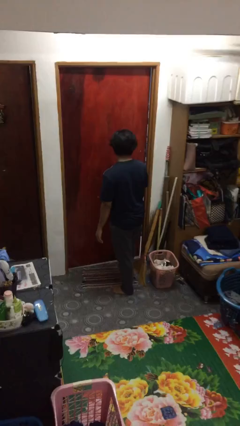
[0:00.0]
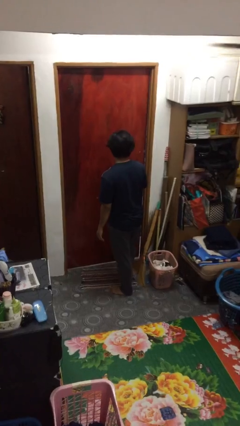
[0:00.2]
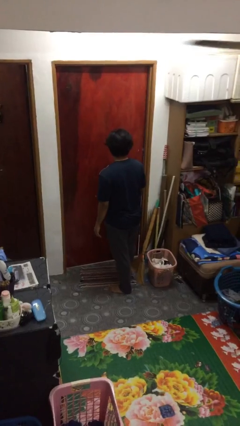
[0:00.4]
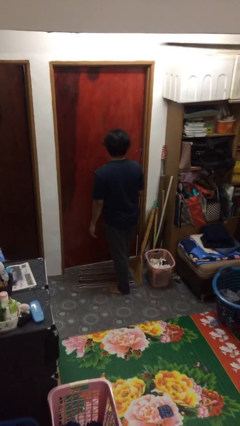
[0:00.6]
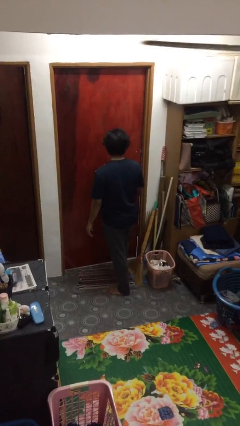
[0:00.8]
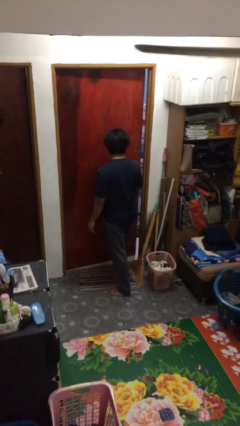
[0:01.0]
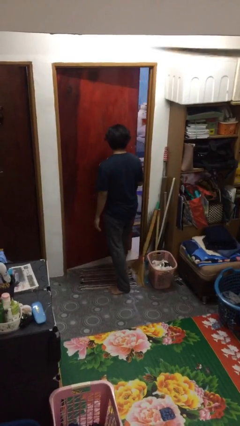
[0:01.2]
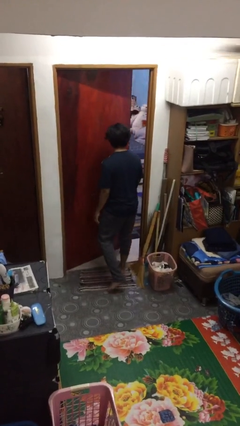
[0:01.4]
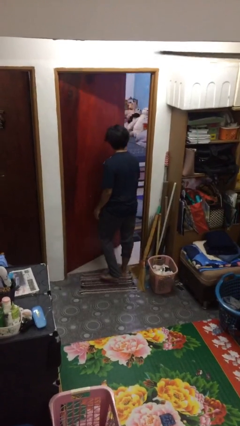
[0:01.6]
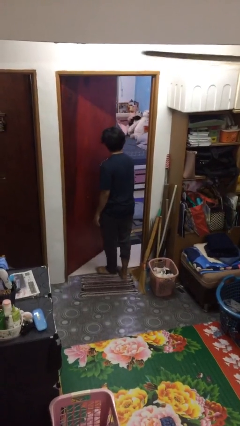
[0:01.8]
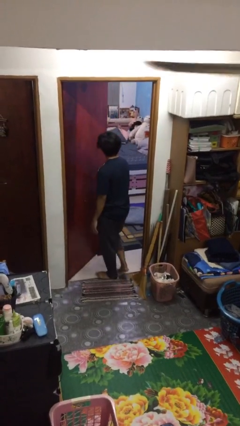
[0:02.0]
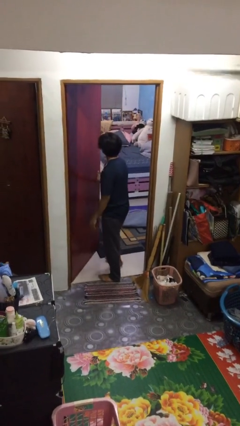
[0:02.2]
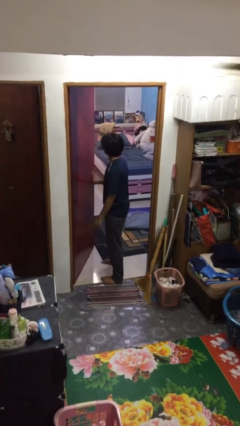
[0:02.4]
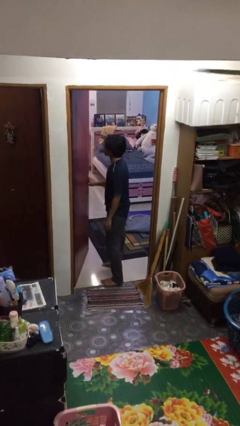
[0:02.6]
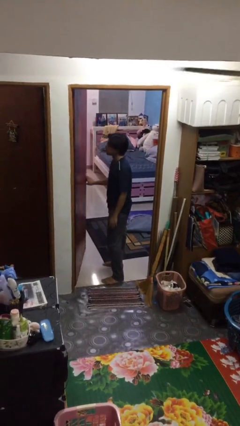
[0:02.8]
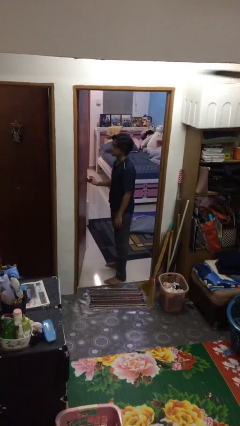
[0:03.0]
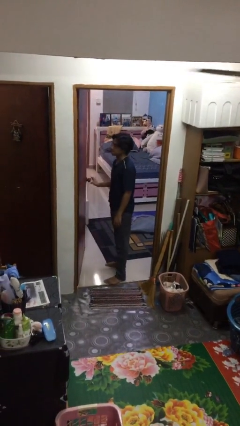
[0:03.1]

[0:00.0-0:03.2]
person opens facility door

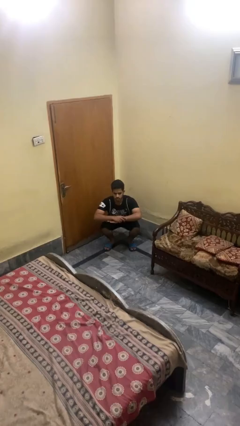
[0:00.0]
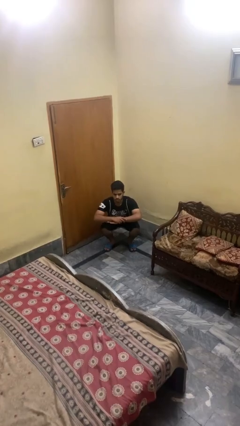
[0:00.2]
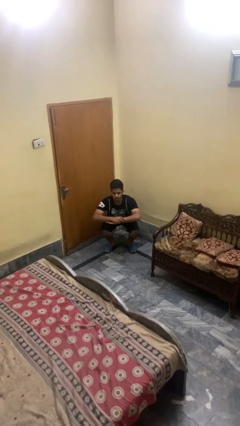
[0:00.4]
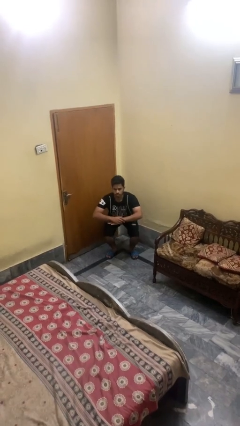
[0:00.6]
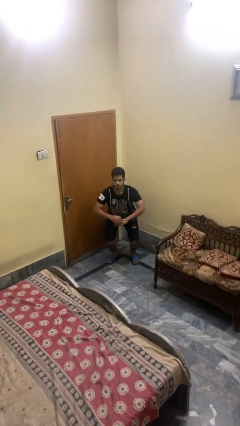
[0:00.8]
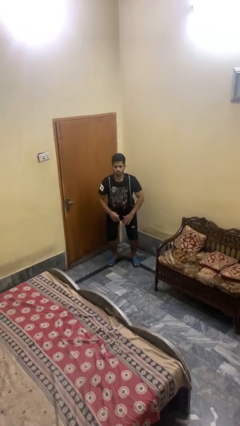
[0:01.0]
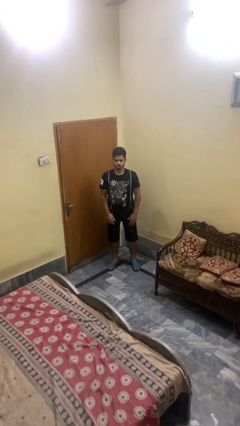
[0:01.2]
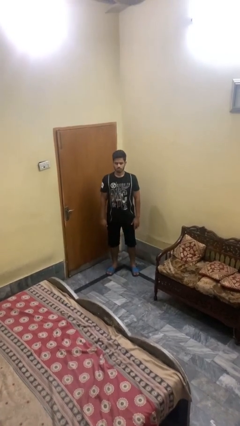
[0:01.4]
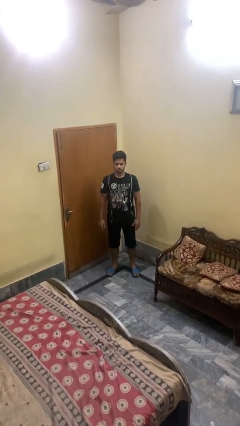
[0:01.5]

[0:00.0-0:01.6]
person stands up

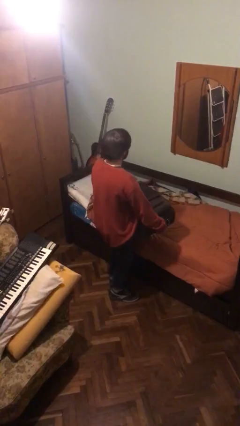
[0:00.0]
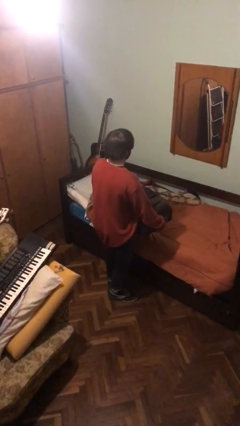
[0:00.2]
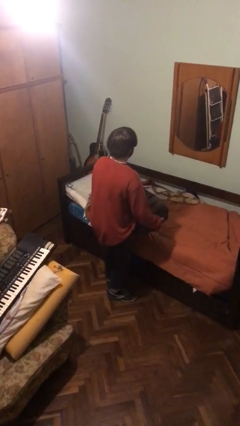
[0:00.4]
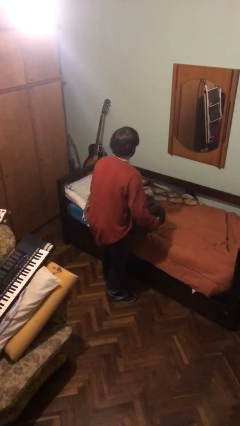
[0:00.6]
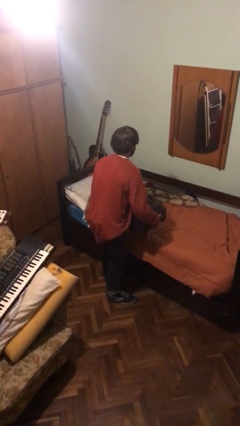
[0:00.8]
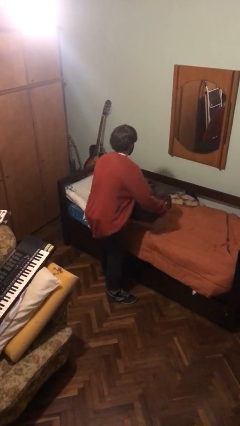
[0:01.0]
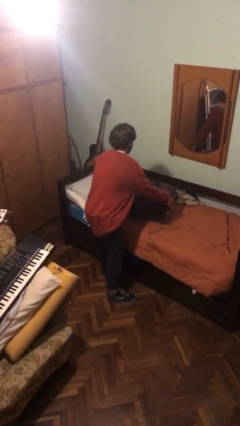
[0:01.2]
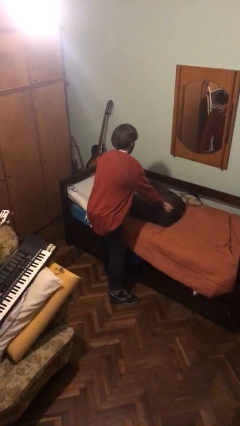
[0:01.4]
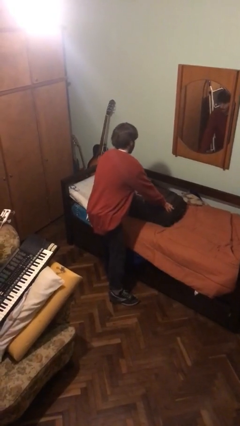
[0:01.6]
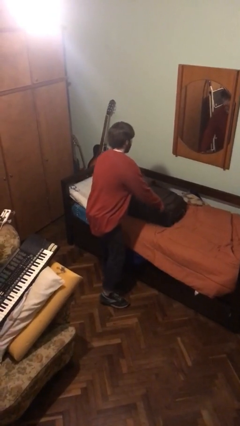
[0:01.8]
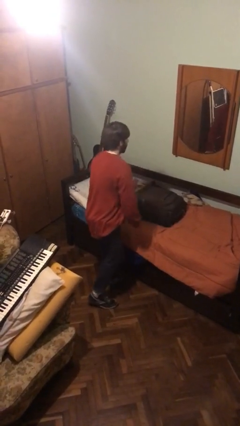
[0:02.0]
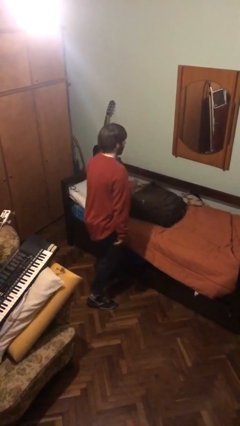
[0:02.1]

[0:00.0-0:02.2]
person puts down object on bed

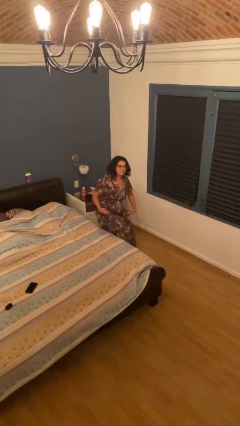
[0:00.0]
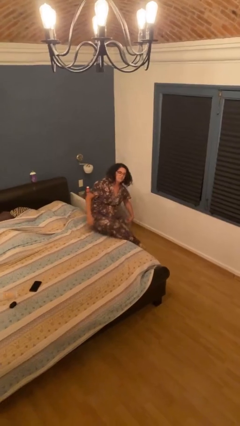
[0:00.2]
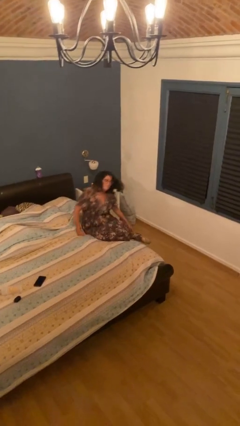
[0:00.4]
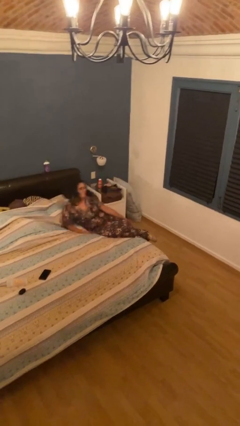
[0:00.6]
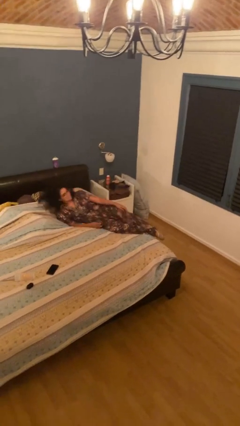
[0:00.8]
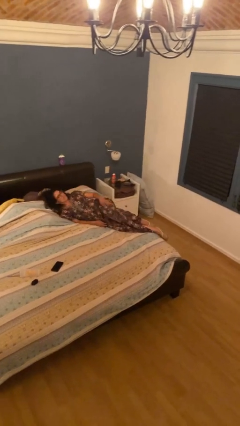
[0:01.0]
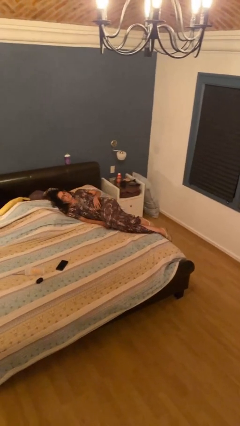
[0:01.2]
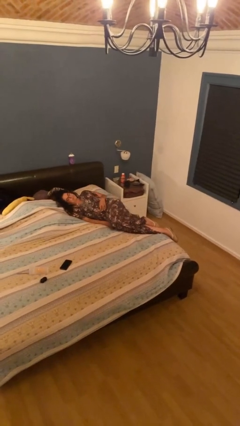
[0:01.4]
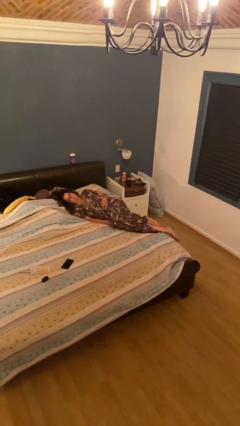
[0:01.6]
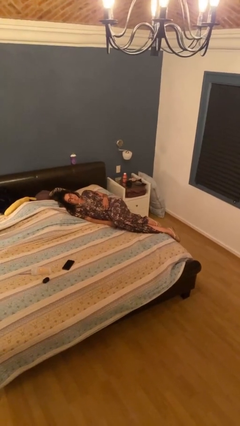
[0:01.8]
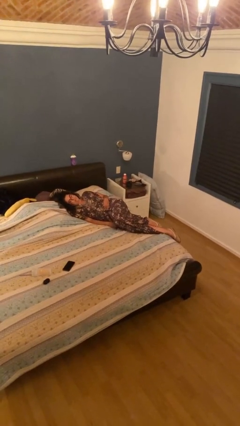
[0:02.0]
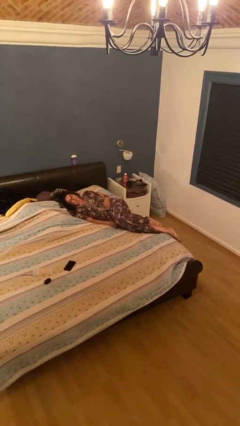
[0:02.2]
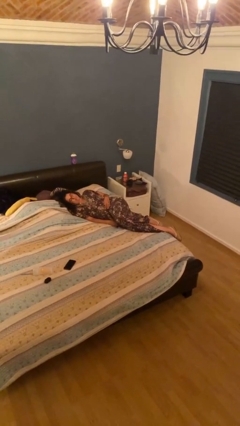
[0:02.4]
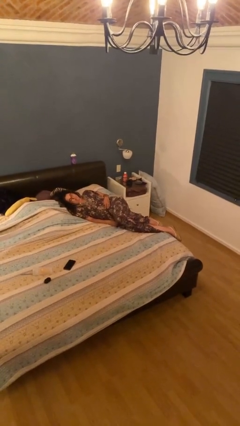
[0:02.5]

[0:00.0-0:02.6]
person lies down on bed

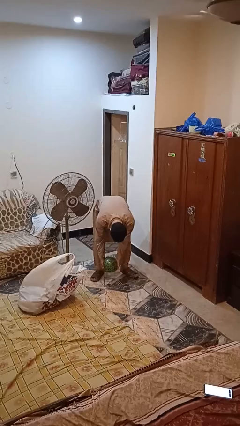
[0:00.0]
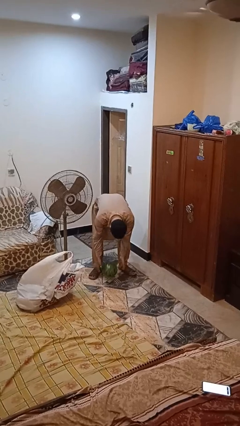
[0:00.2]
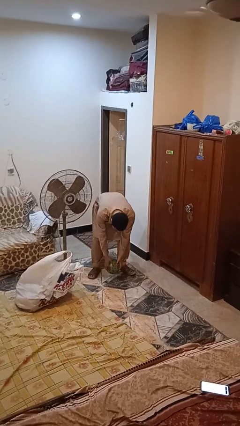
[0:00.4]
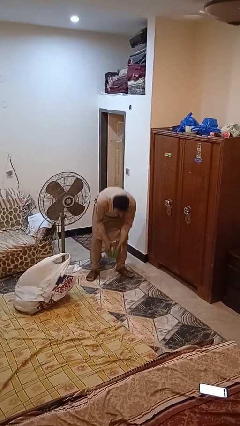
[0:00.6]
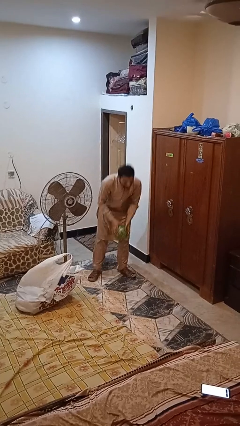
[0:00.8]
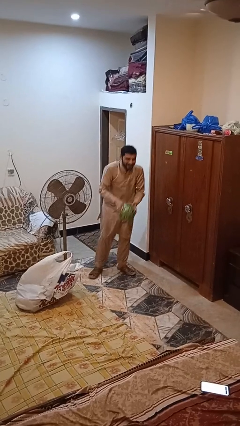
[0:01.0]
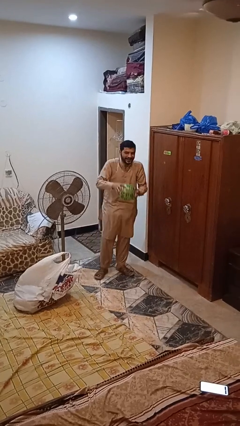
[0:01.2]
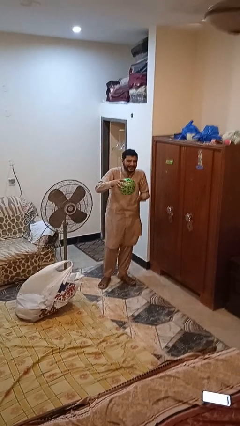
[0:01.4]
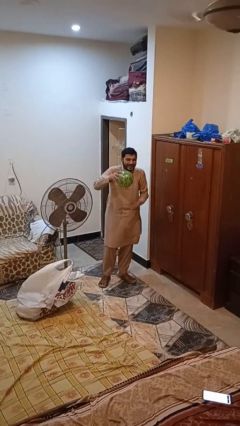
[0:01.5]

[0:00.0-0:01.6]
person picks up object from floor

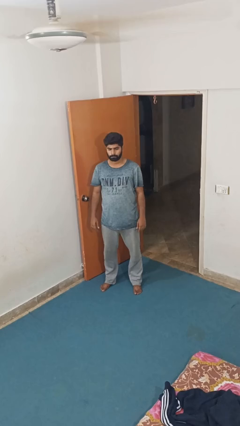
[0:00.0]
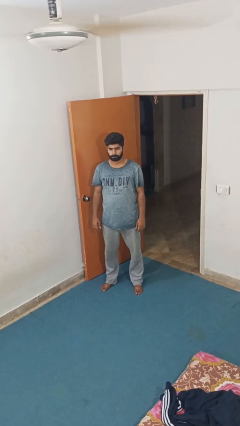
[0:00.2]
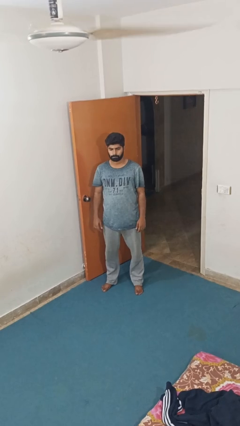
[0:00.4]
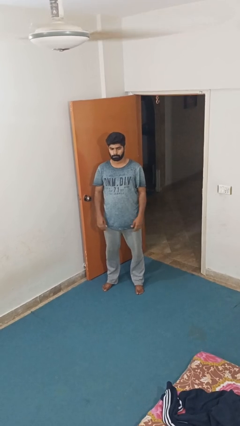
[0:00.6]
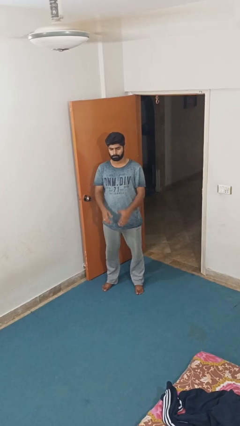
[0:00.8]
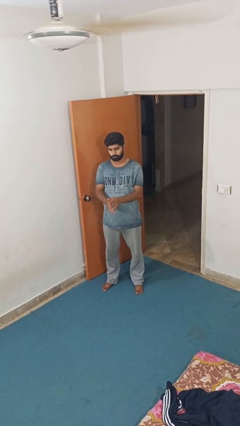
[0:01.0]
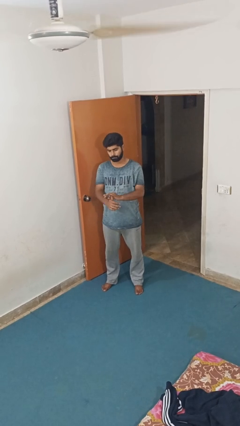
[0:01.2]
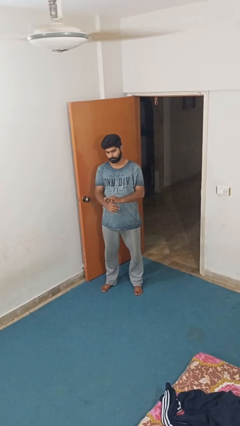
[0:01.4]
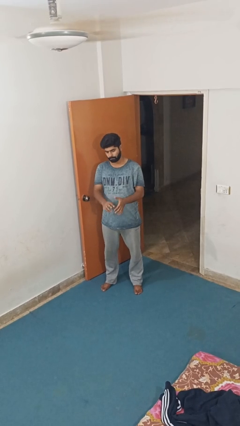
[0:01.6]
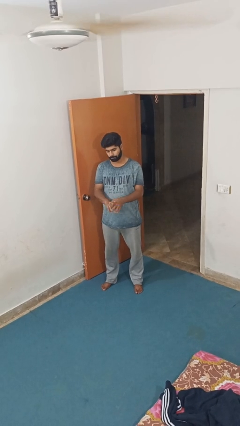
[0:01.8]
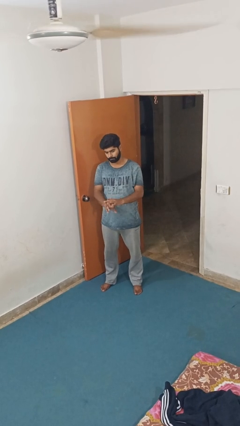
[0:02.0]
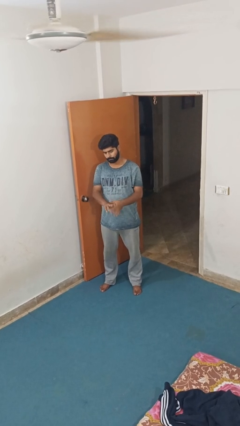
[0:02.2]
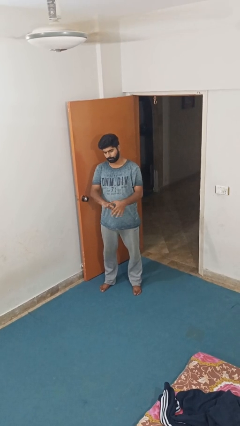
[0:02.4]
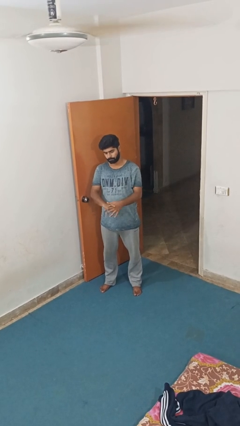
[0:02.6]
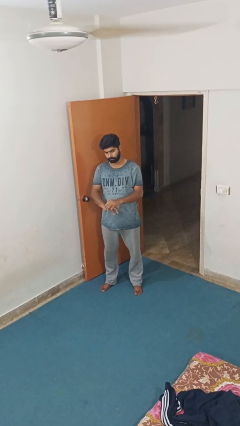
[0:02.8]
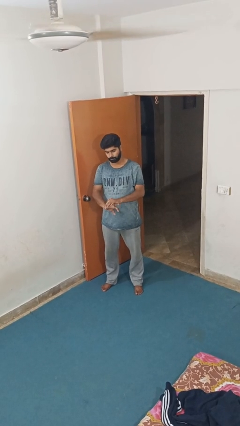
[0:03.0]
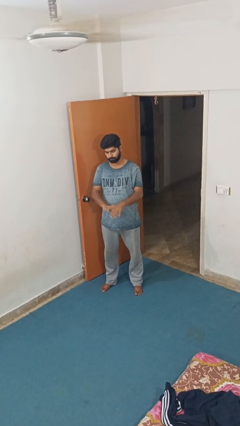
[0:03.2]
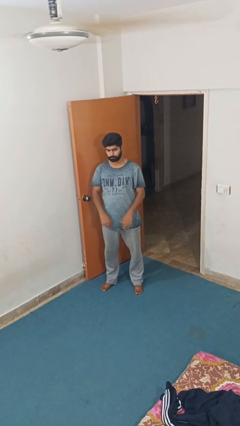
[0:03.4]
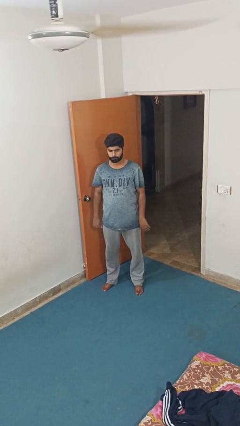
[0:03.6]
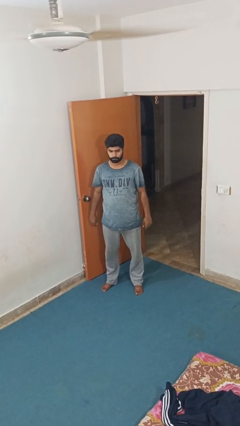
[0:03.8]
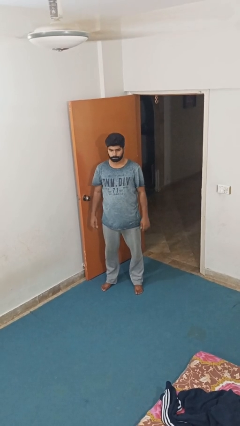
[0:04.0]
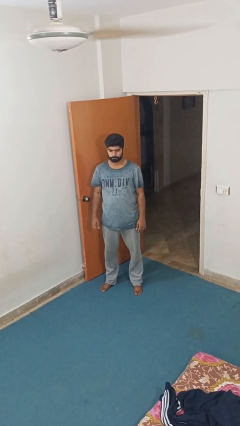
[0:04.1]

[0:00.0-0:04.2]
person snaps fingers

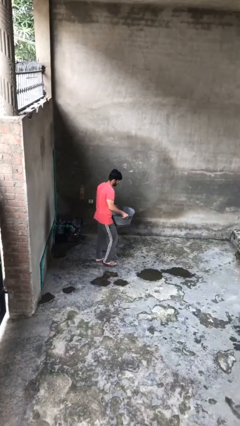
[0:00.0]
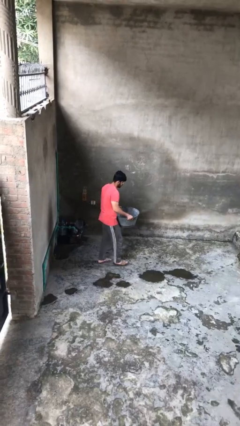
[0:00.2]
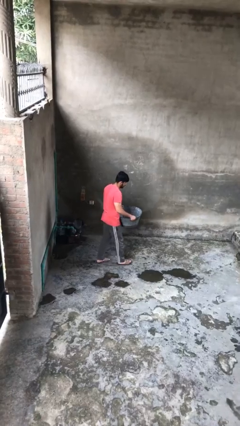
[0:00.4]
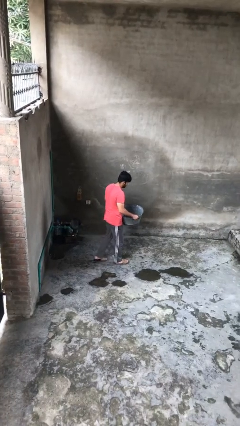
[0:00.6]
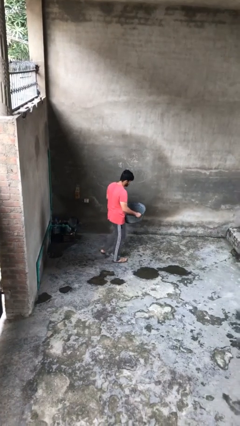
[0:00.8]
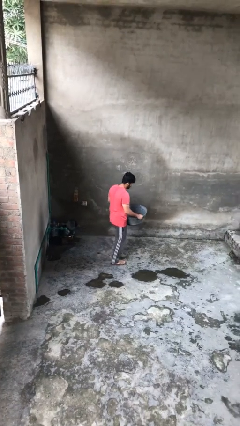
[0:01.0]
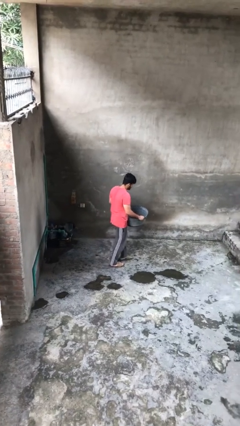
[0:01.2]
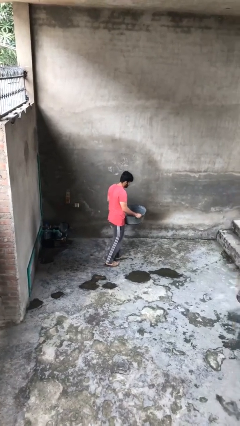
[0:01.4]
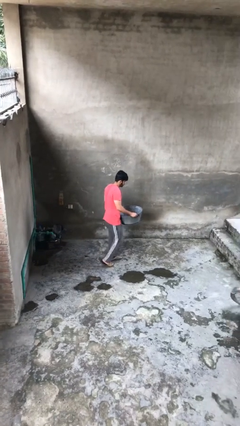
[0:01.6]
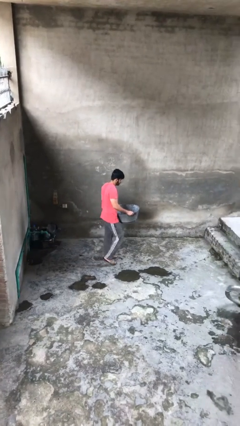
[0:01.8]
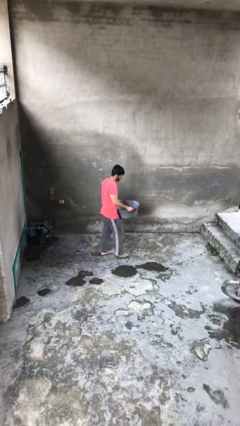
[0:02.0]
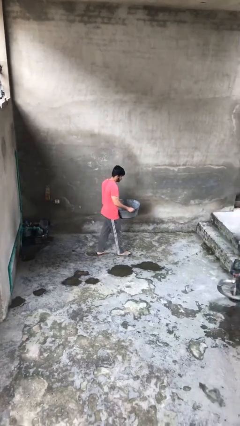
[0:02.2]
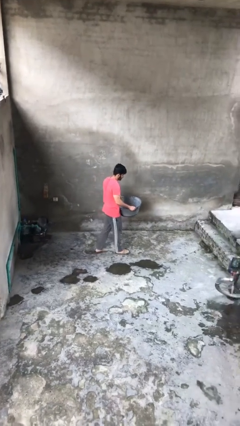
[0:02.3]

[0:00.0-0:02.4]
person carries heavy object
